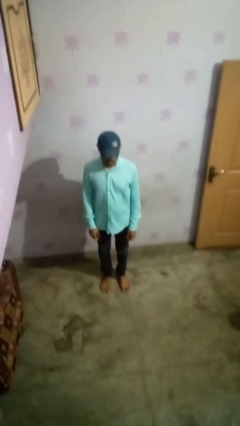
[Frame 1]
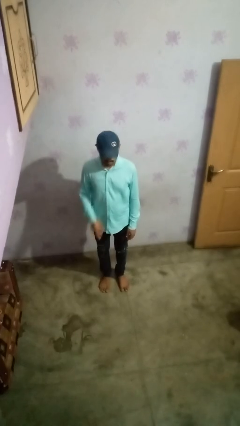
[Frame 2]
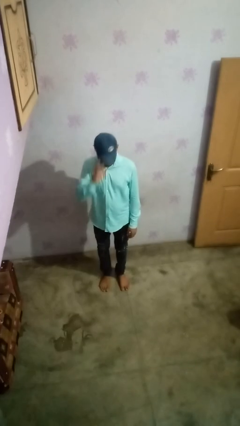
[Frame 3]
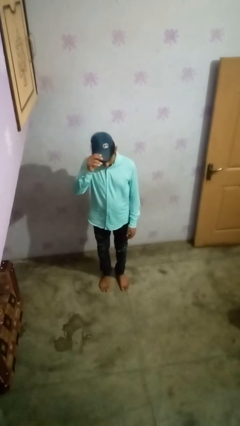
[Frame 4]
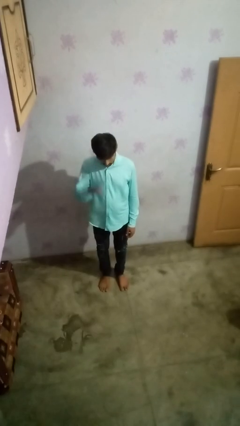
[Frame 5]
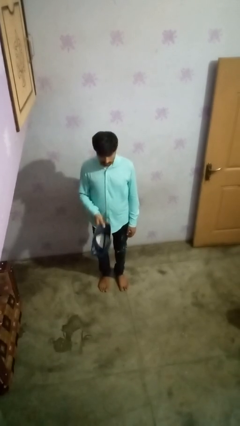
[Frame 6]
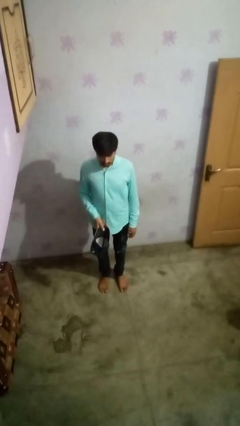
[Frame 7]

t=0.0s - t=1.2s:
person takes off hat

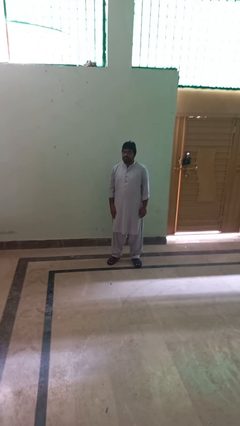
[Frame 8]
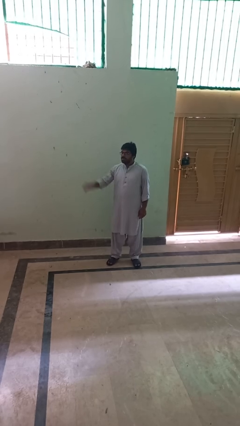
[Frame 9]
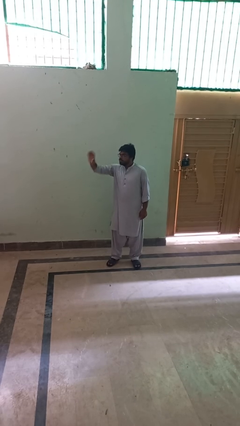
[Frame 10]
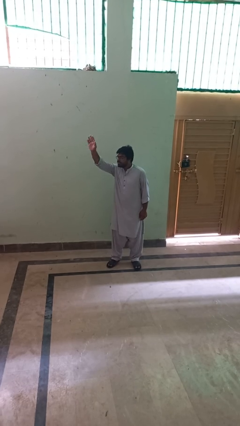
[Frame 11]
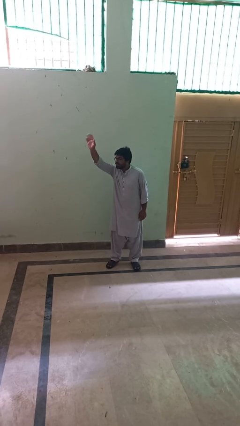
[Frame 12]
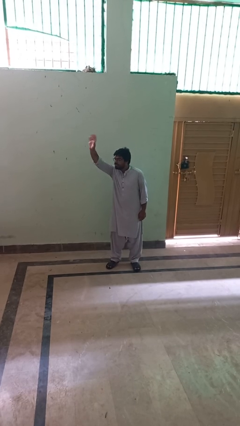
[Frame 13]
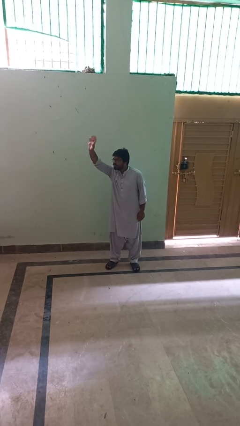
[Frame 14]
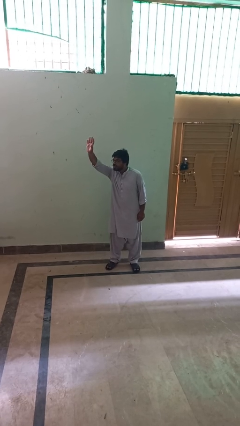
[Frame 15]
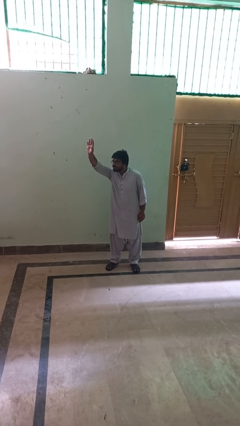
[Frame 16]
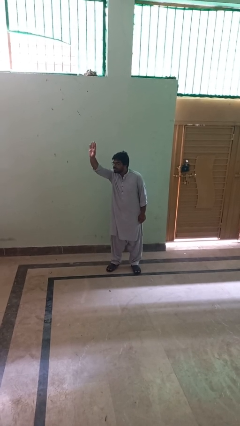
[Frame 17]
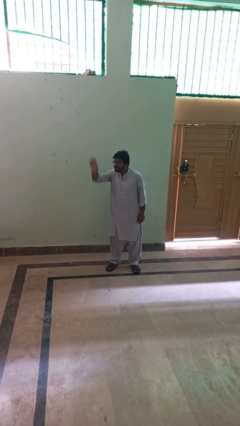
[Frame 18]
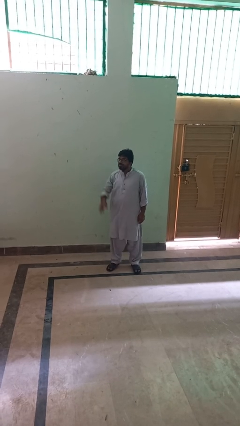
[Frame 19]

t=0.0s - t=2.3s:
person waves at person

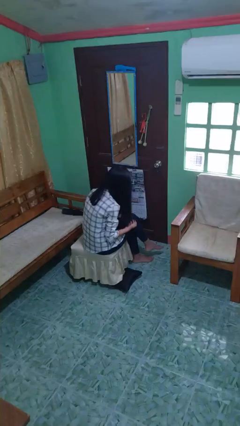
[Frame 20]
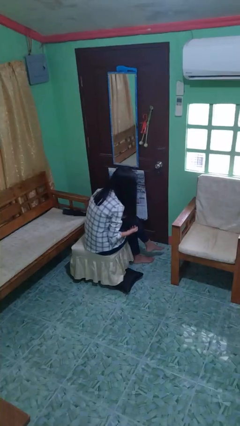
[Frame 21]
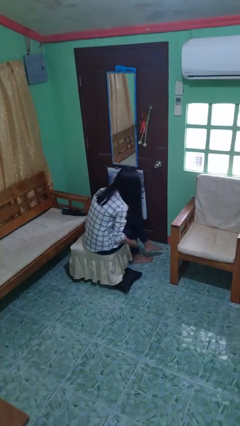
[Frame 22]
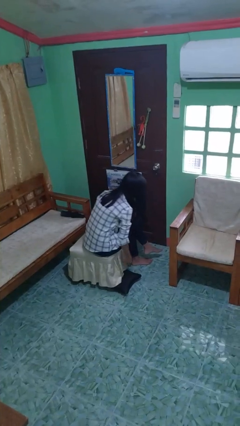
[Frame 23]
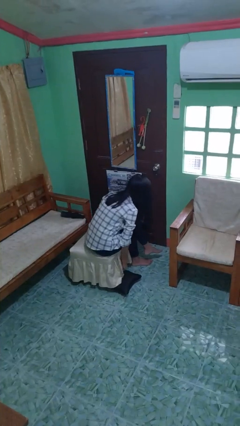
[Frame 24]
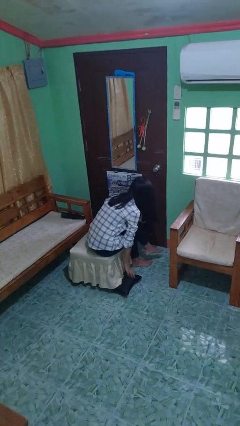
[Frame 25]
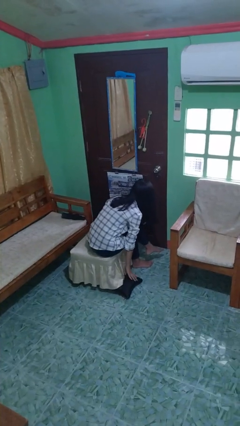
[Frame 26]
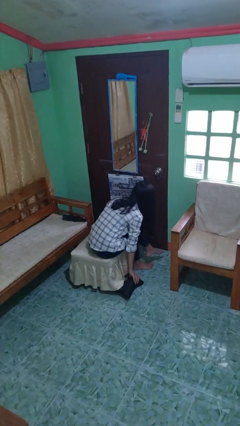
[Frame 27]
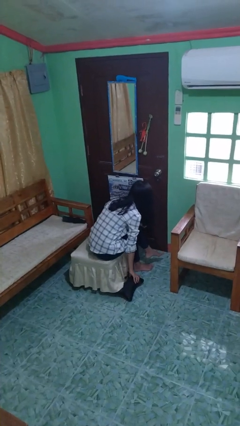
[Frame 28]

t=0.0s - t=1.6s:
person picks up object from floor

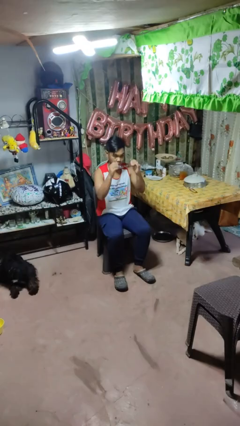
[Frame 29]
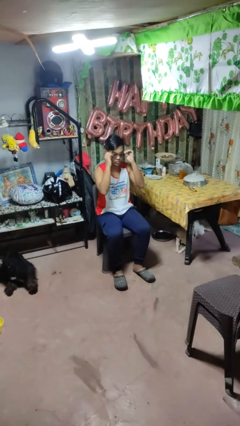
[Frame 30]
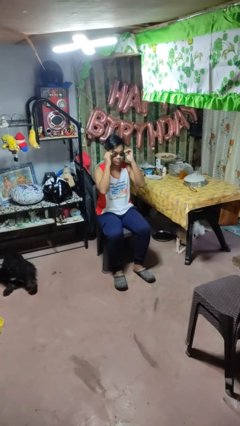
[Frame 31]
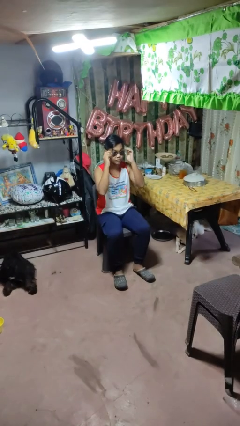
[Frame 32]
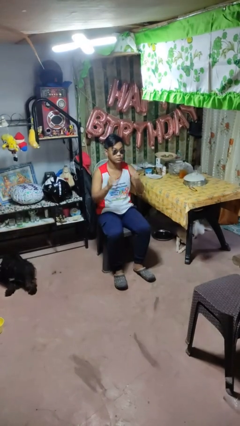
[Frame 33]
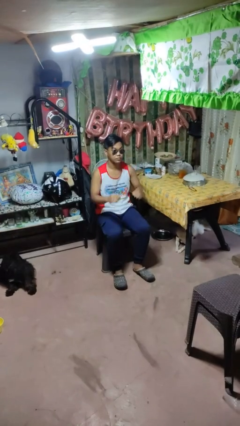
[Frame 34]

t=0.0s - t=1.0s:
person puts on sunglasses

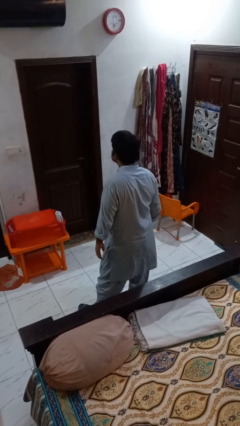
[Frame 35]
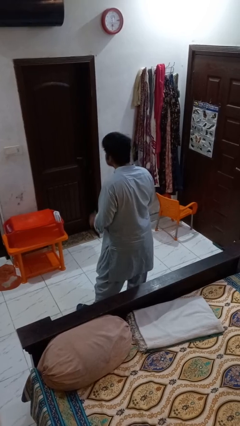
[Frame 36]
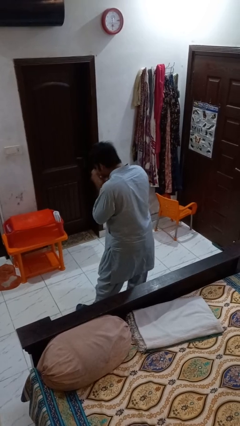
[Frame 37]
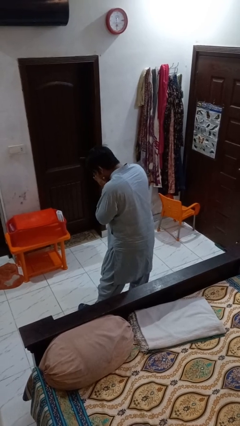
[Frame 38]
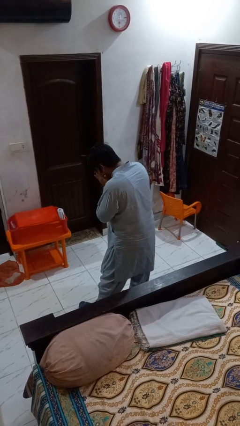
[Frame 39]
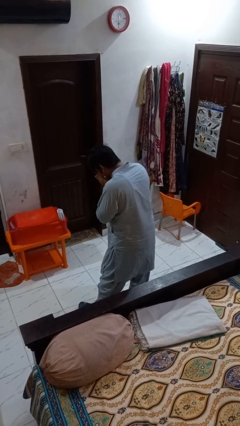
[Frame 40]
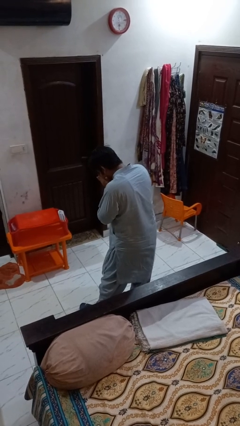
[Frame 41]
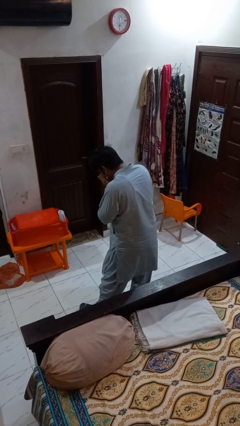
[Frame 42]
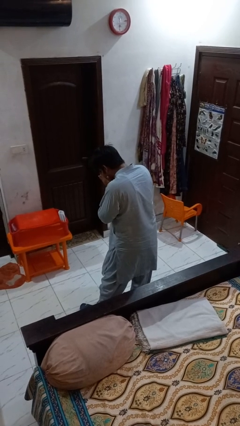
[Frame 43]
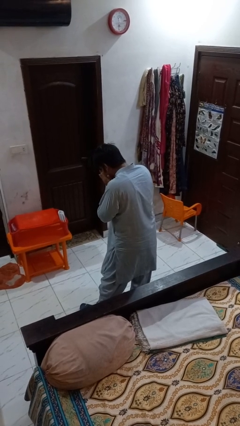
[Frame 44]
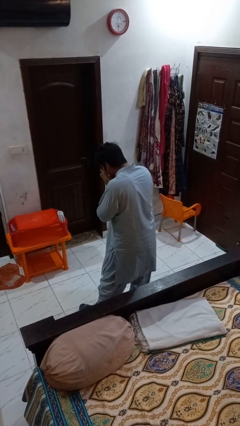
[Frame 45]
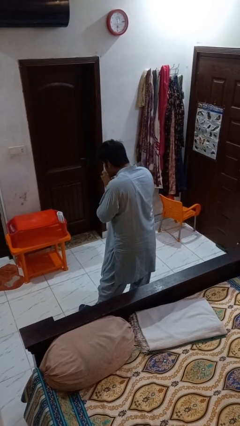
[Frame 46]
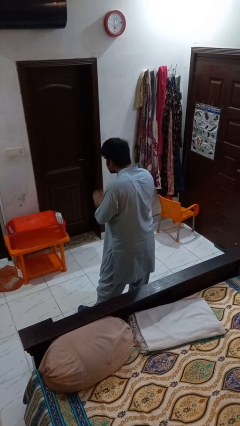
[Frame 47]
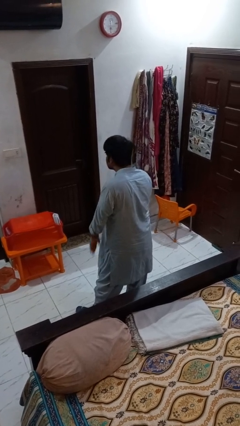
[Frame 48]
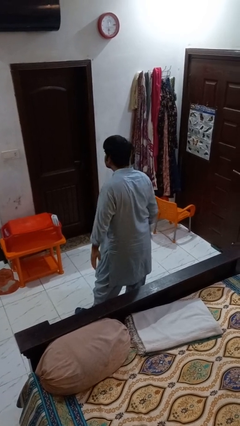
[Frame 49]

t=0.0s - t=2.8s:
person sneezes into hand

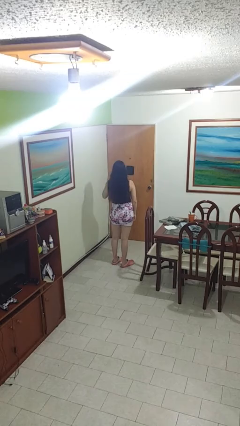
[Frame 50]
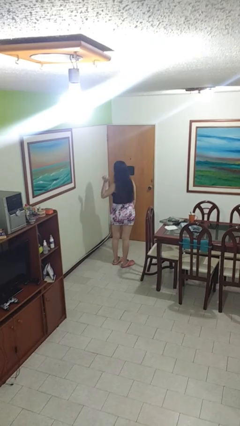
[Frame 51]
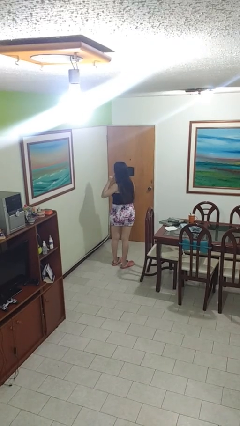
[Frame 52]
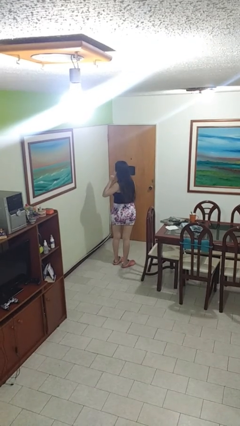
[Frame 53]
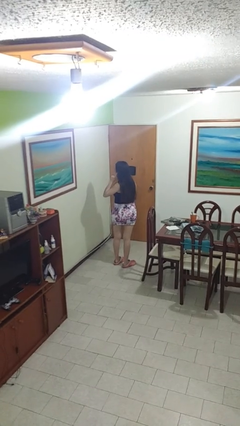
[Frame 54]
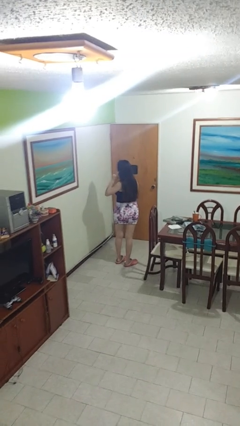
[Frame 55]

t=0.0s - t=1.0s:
person gestures listen closely

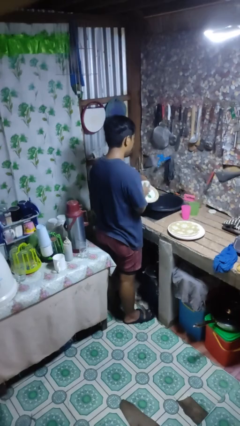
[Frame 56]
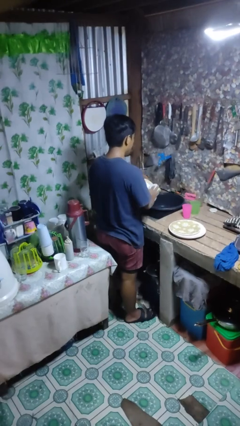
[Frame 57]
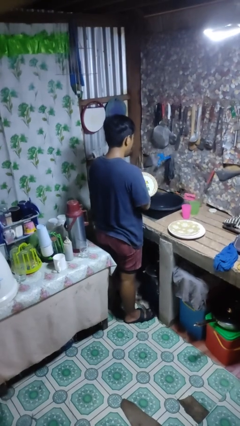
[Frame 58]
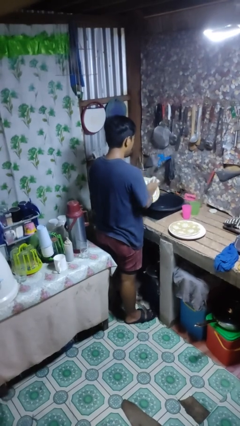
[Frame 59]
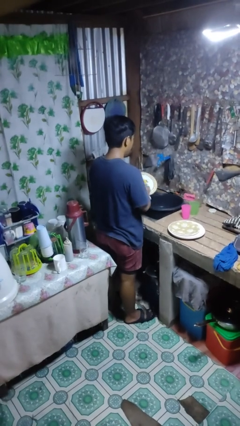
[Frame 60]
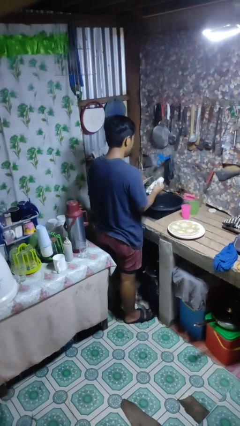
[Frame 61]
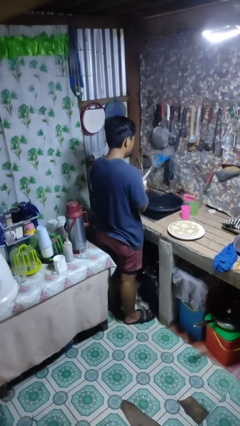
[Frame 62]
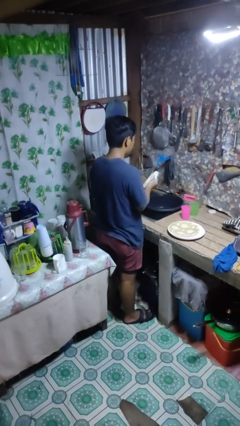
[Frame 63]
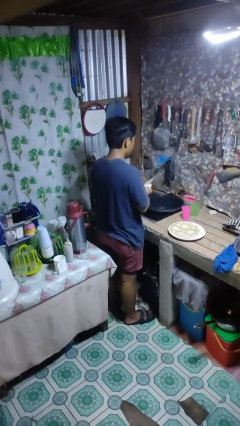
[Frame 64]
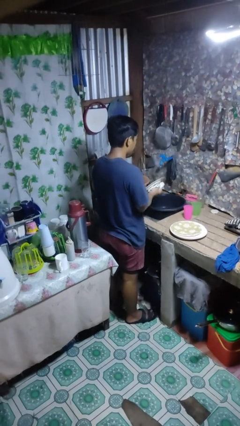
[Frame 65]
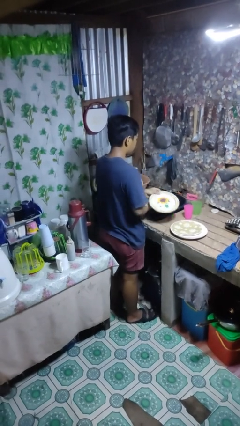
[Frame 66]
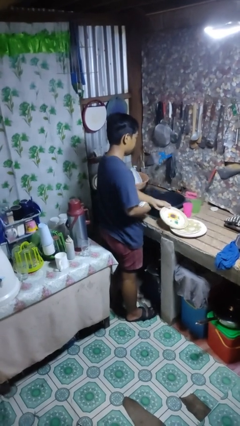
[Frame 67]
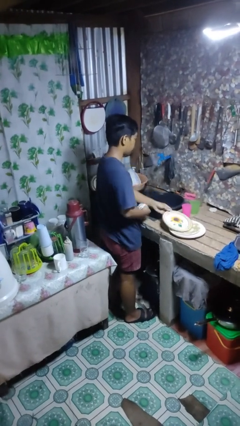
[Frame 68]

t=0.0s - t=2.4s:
person dries dish

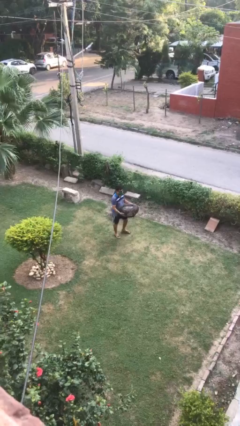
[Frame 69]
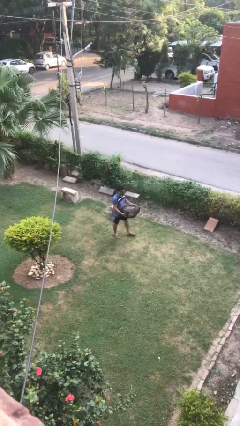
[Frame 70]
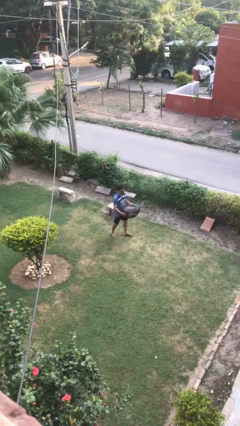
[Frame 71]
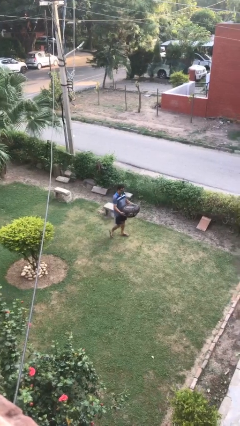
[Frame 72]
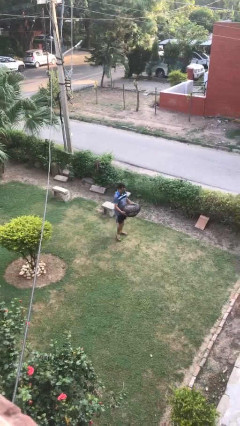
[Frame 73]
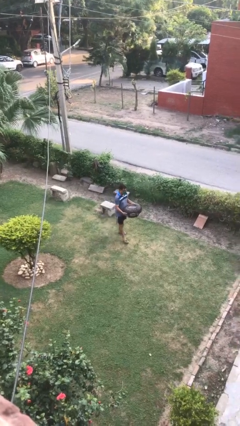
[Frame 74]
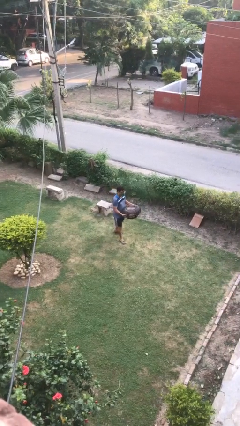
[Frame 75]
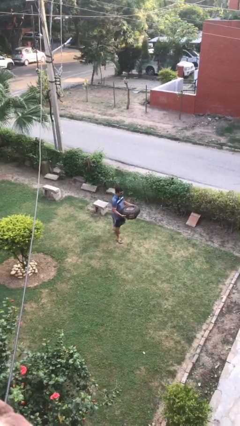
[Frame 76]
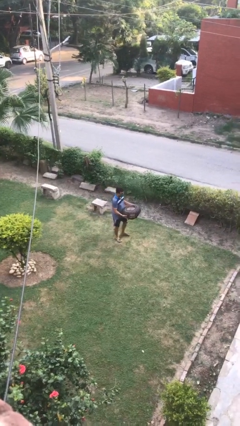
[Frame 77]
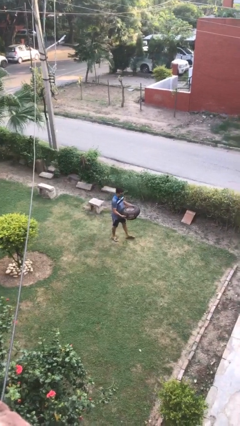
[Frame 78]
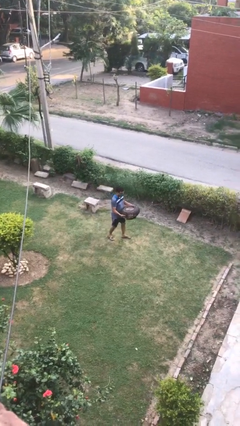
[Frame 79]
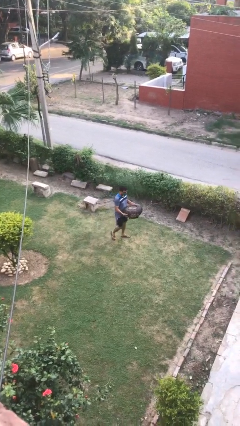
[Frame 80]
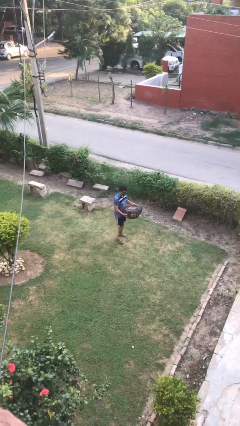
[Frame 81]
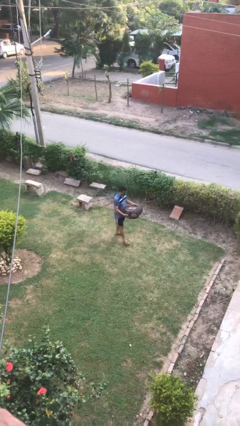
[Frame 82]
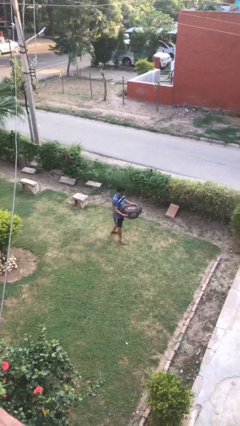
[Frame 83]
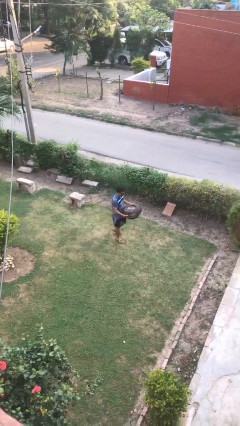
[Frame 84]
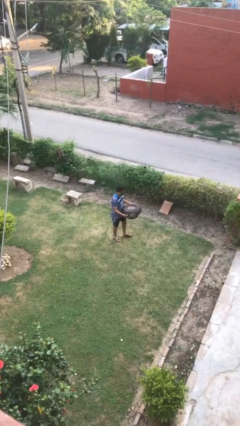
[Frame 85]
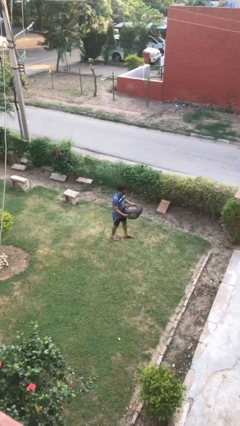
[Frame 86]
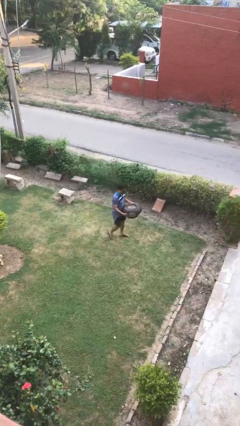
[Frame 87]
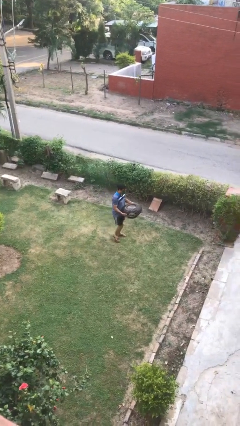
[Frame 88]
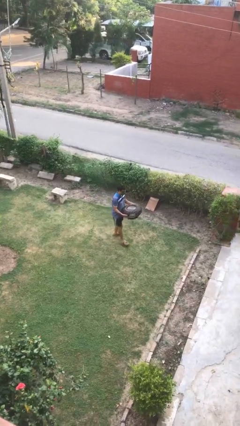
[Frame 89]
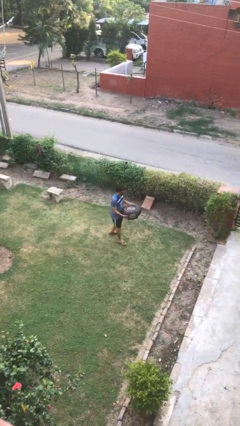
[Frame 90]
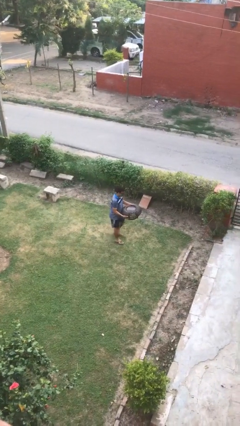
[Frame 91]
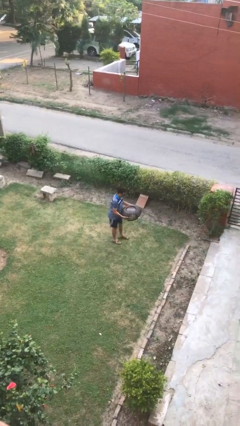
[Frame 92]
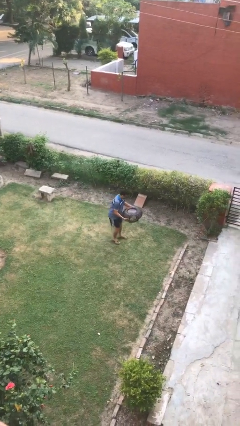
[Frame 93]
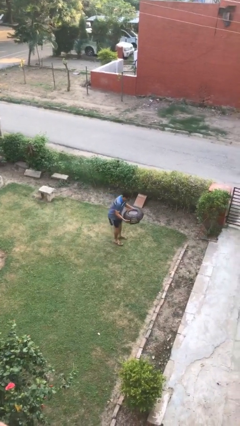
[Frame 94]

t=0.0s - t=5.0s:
person carries heavy object
